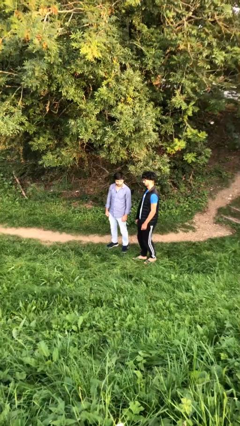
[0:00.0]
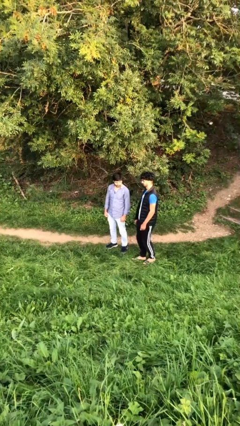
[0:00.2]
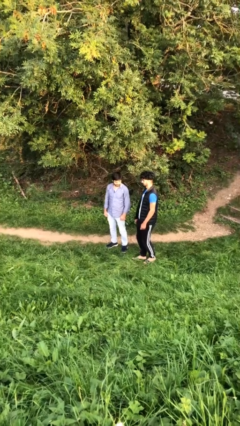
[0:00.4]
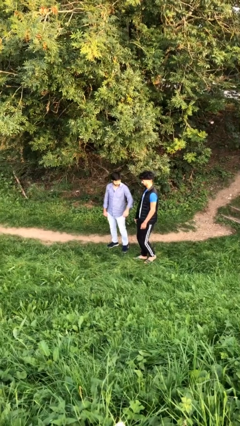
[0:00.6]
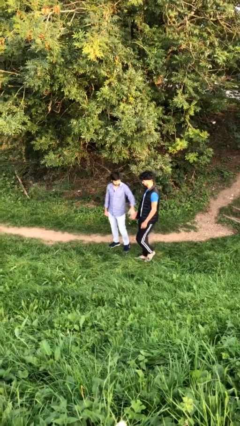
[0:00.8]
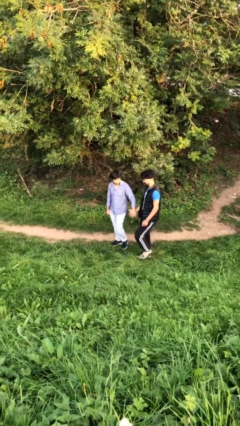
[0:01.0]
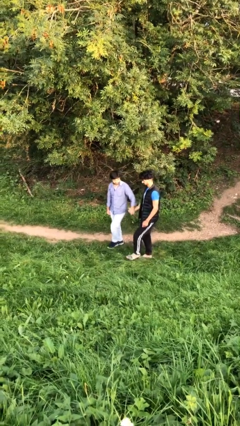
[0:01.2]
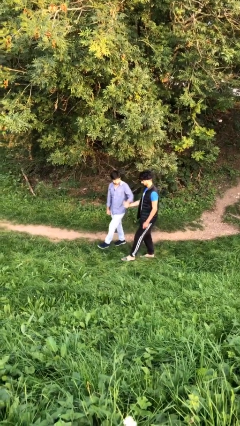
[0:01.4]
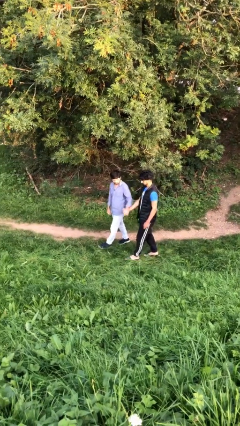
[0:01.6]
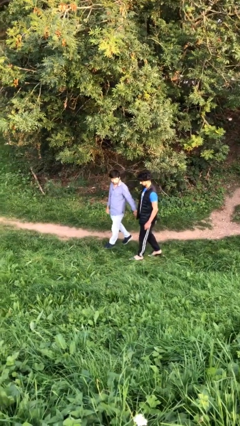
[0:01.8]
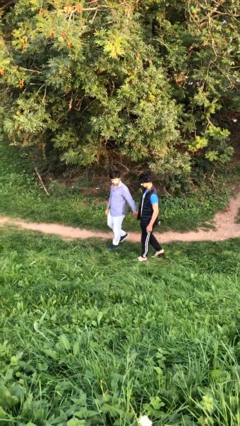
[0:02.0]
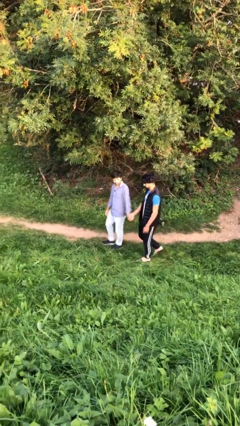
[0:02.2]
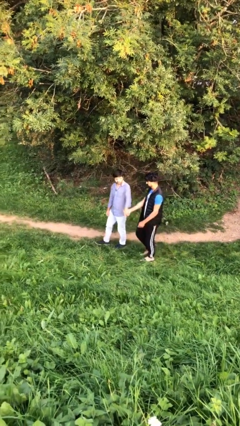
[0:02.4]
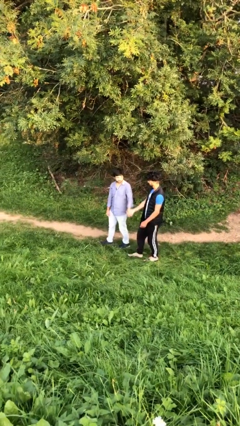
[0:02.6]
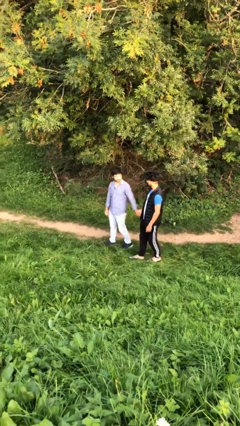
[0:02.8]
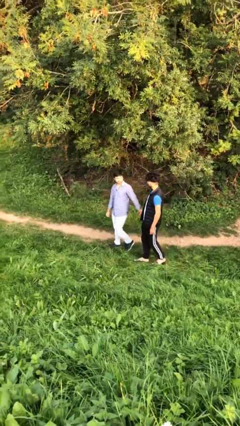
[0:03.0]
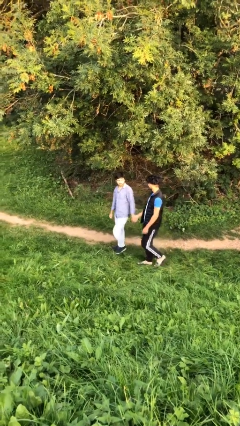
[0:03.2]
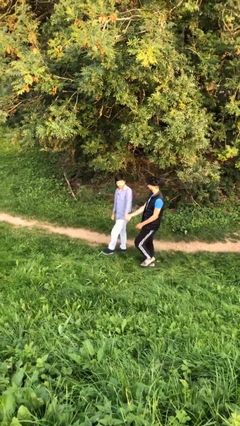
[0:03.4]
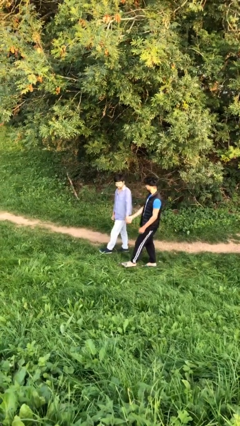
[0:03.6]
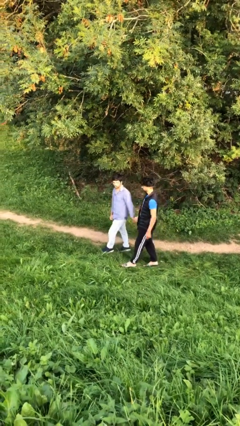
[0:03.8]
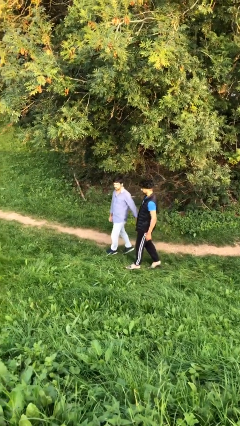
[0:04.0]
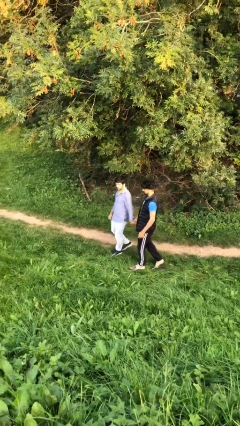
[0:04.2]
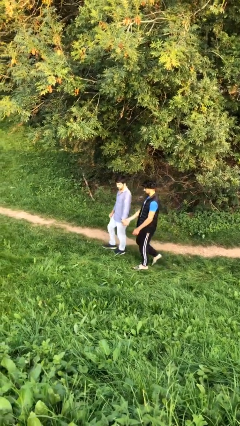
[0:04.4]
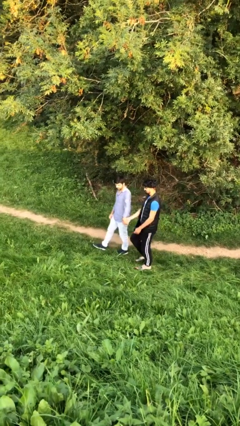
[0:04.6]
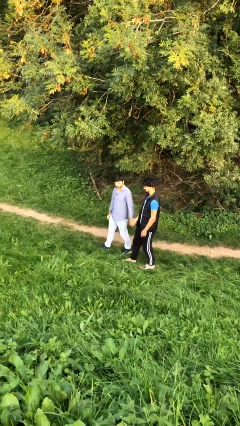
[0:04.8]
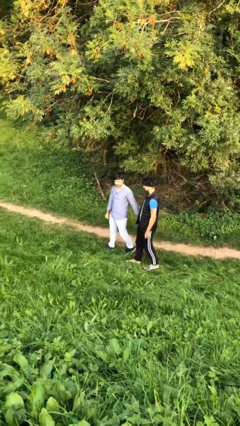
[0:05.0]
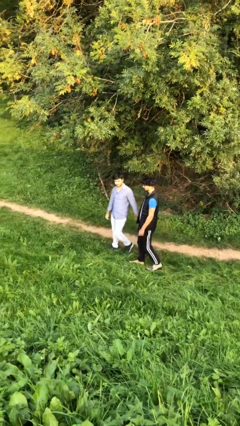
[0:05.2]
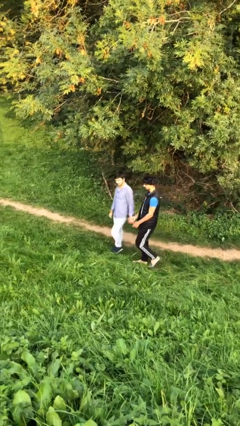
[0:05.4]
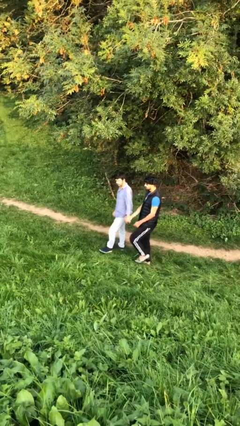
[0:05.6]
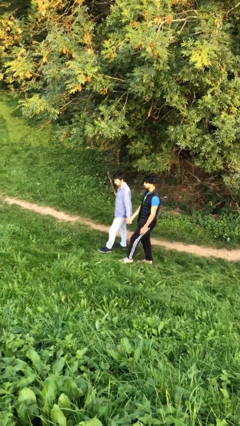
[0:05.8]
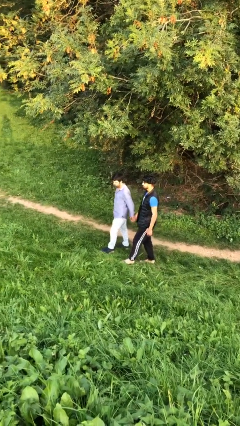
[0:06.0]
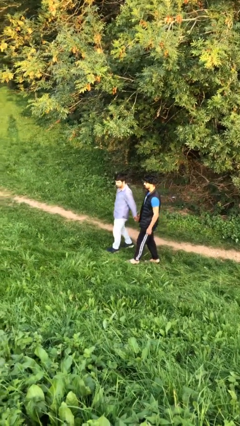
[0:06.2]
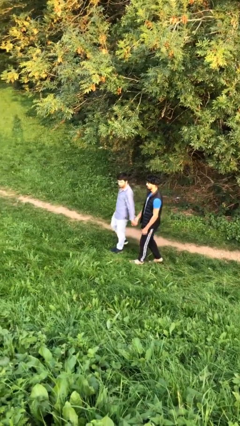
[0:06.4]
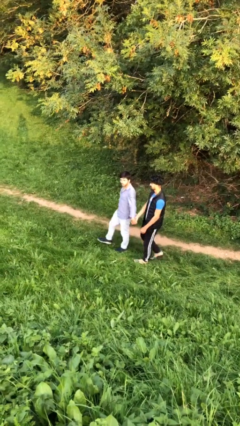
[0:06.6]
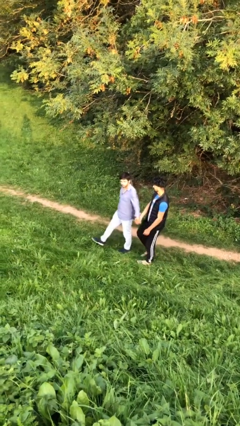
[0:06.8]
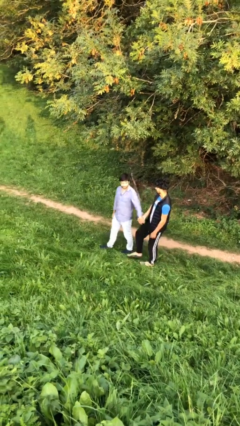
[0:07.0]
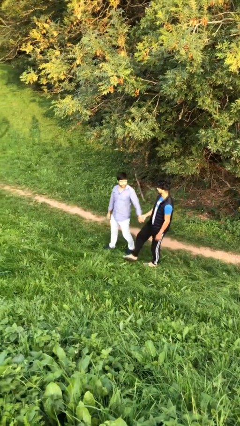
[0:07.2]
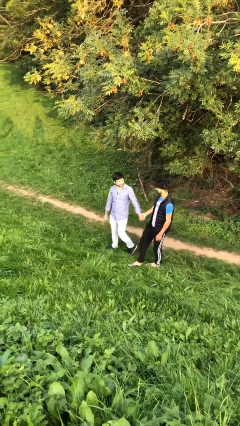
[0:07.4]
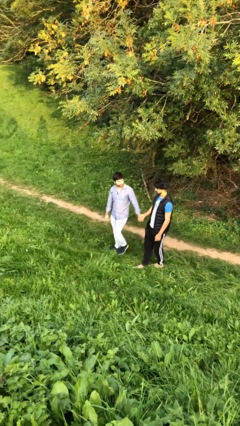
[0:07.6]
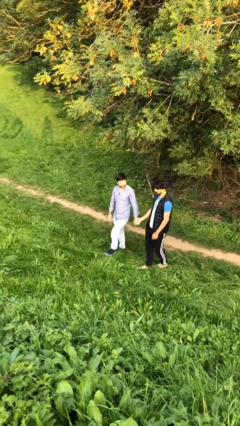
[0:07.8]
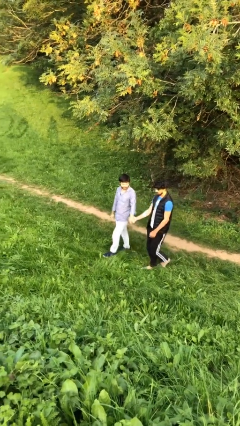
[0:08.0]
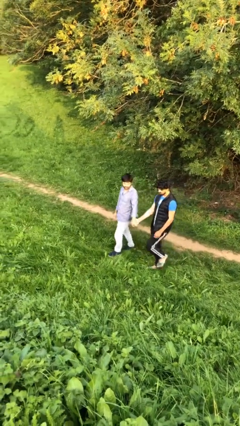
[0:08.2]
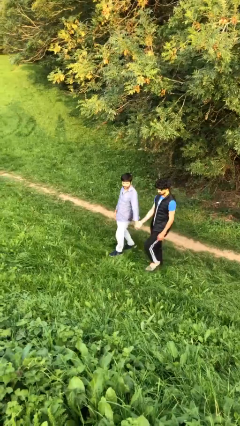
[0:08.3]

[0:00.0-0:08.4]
person holds hand

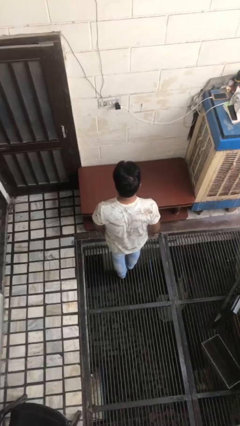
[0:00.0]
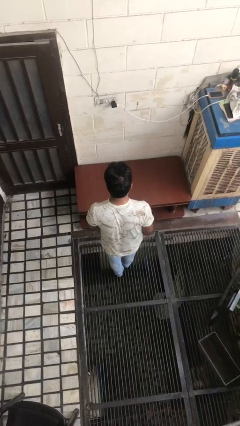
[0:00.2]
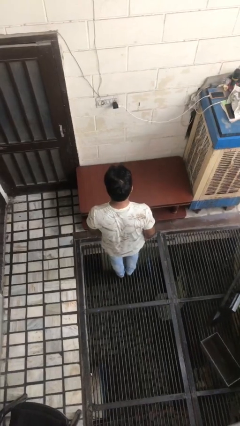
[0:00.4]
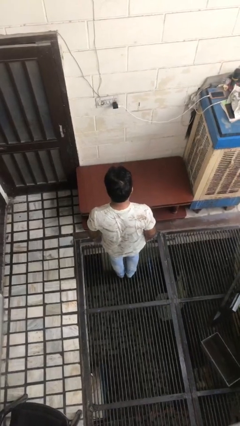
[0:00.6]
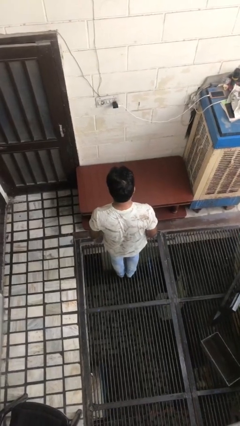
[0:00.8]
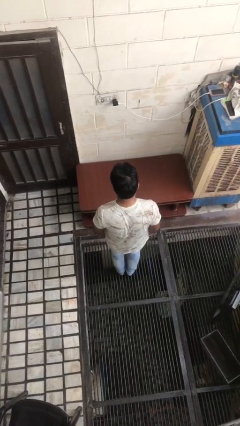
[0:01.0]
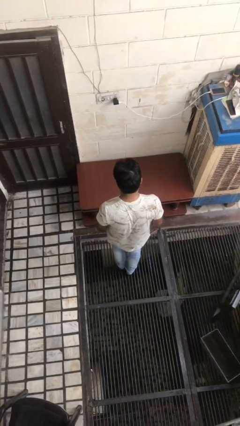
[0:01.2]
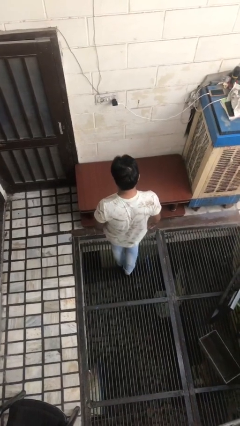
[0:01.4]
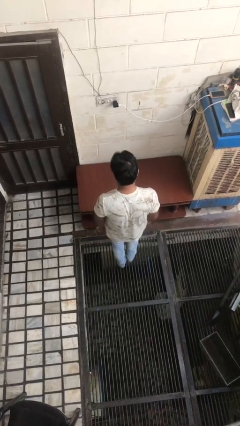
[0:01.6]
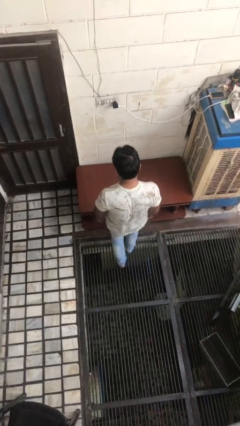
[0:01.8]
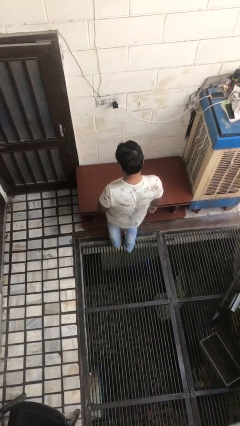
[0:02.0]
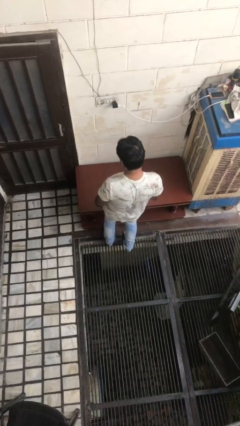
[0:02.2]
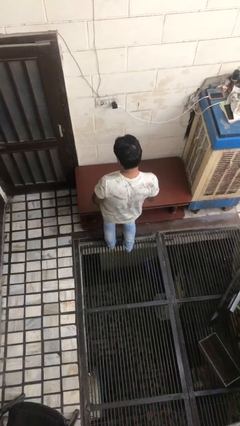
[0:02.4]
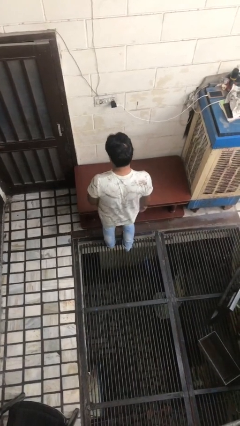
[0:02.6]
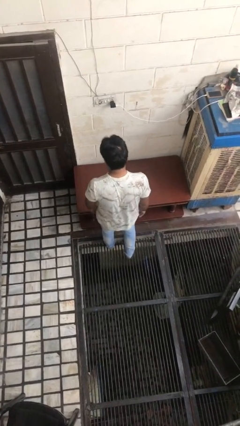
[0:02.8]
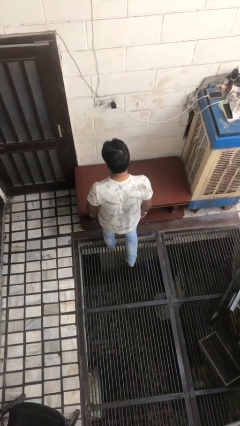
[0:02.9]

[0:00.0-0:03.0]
person bumps into table

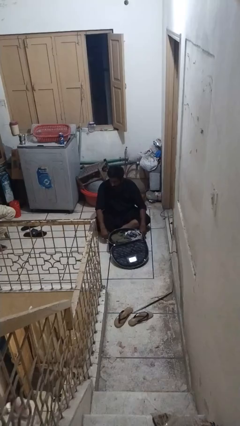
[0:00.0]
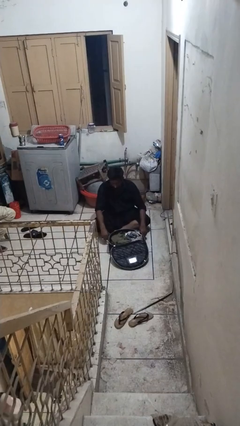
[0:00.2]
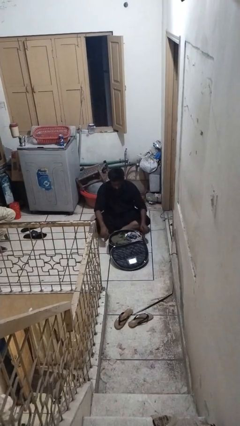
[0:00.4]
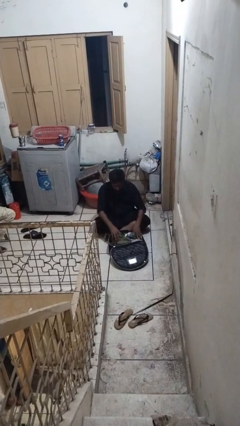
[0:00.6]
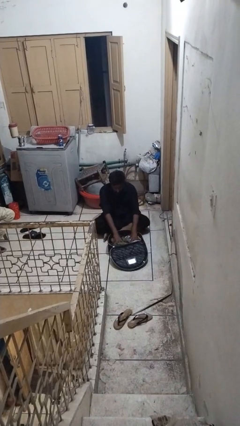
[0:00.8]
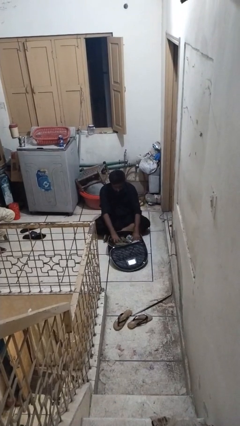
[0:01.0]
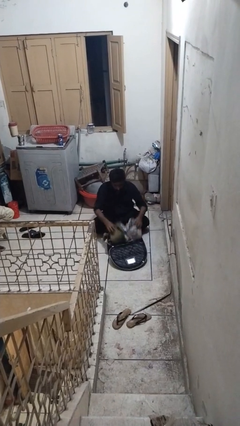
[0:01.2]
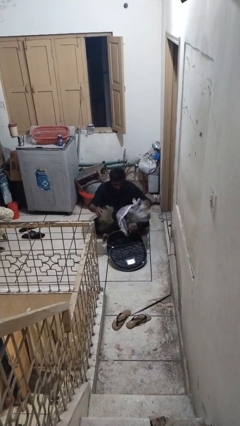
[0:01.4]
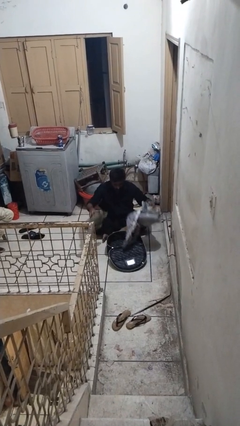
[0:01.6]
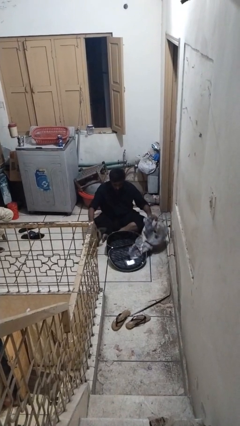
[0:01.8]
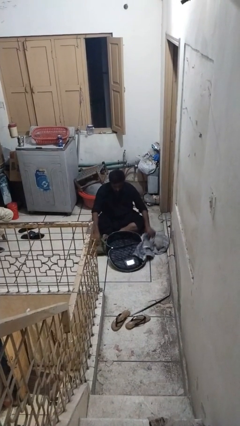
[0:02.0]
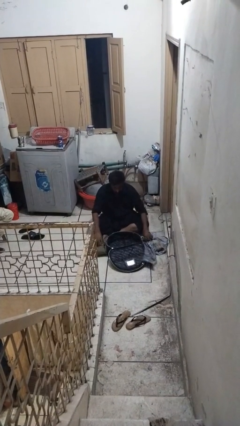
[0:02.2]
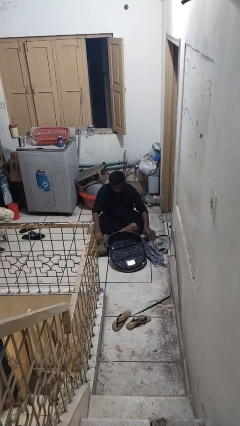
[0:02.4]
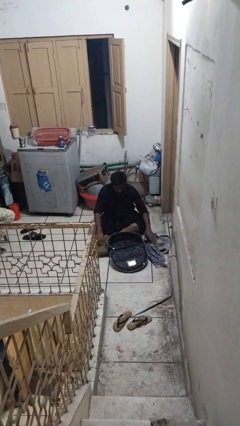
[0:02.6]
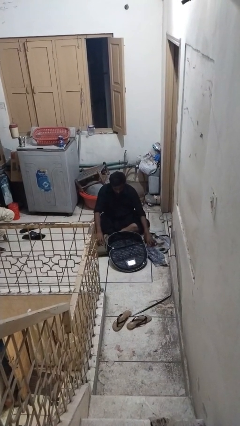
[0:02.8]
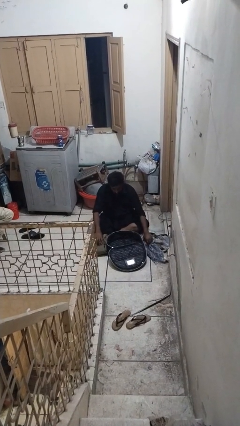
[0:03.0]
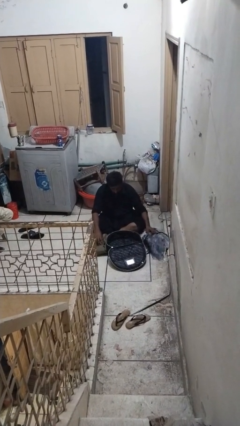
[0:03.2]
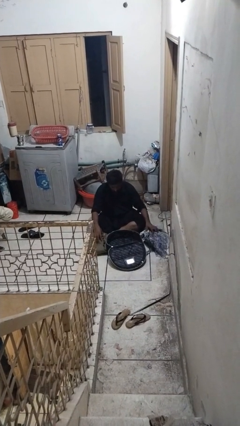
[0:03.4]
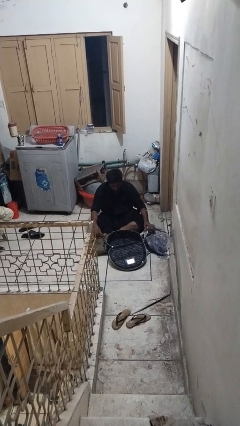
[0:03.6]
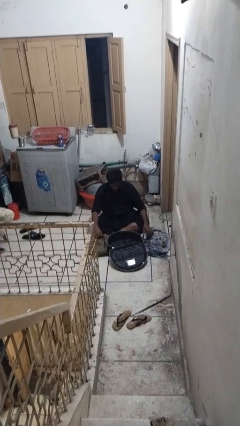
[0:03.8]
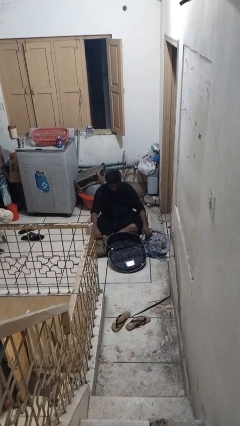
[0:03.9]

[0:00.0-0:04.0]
person unloads clothes from suitcase

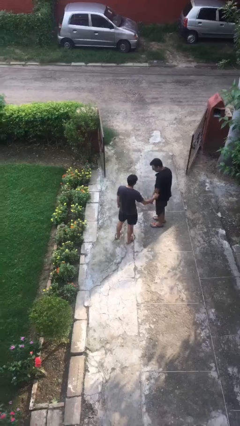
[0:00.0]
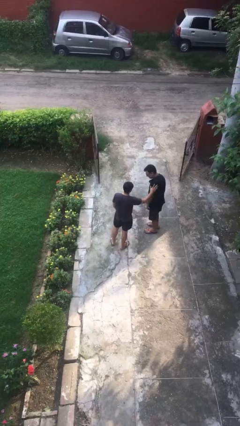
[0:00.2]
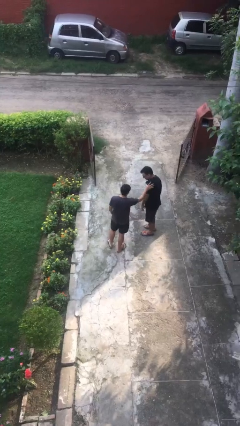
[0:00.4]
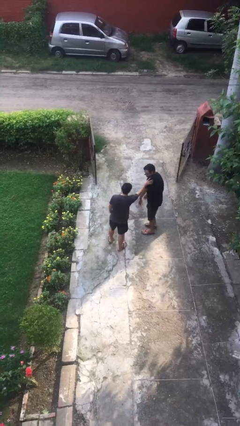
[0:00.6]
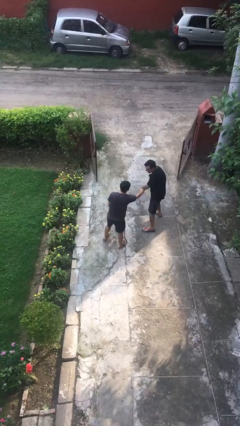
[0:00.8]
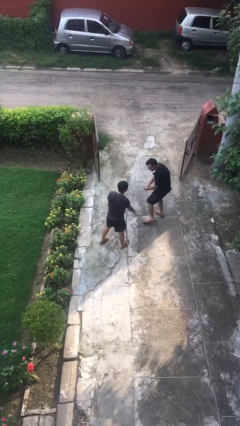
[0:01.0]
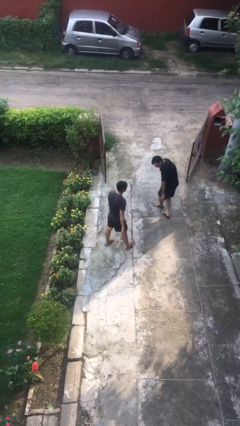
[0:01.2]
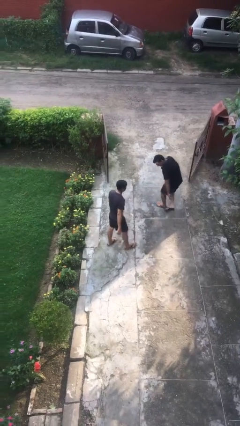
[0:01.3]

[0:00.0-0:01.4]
person shoves person

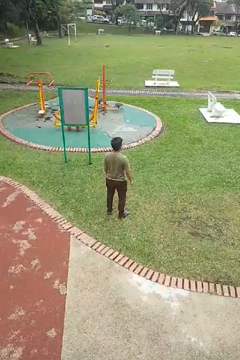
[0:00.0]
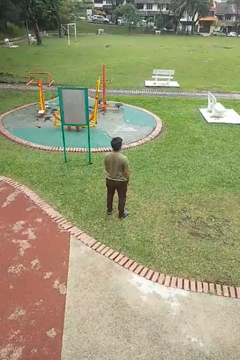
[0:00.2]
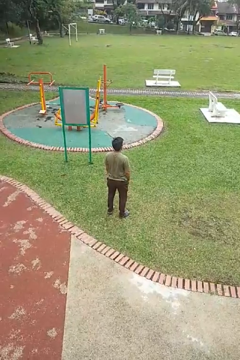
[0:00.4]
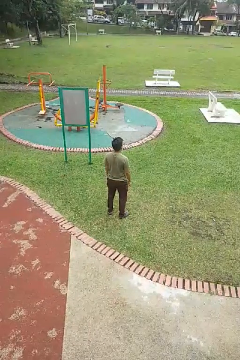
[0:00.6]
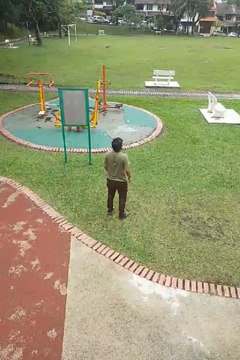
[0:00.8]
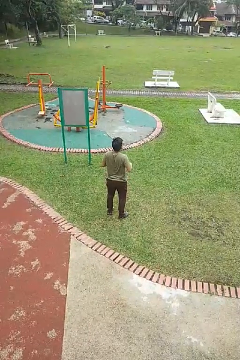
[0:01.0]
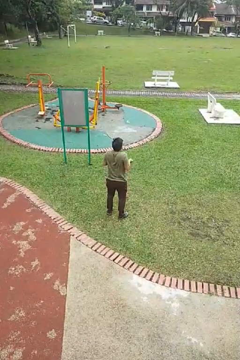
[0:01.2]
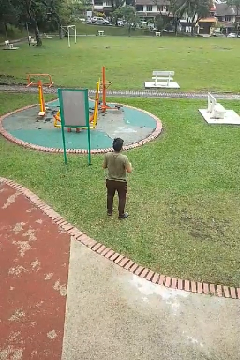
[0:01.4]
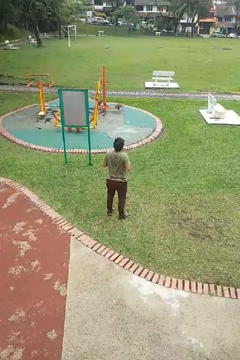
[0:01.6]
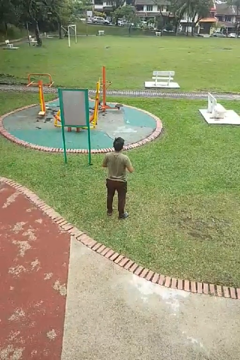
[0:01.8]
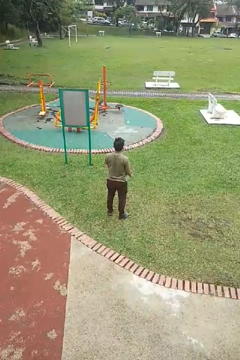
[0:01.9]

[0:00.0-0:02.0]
person shrugs
